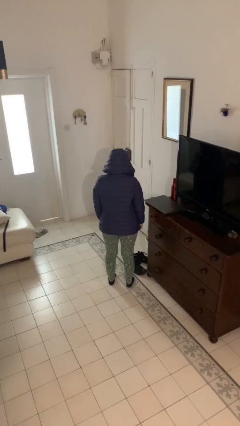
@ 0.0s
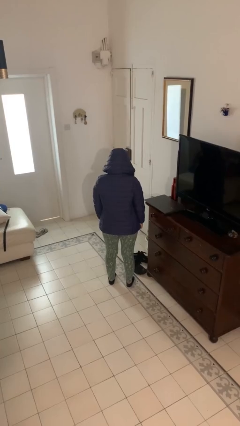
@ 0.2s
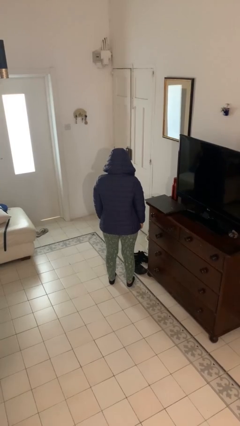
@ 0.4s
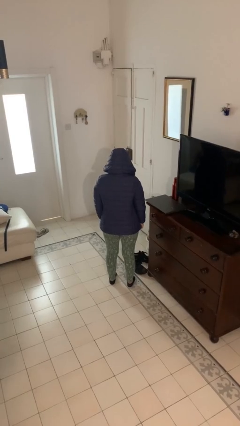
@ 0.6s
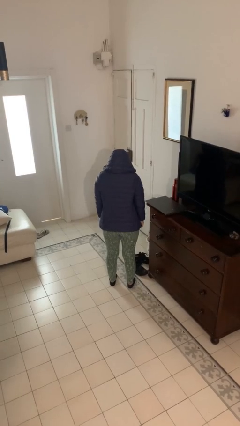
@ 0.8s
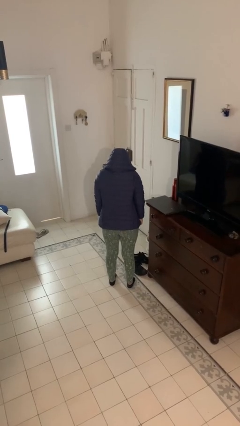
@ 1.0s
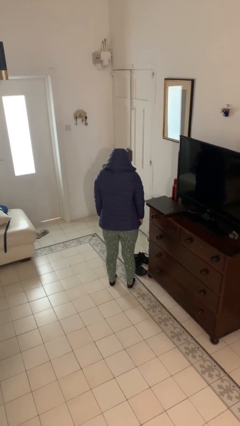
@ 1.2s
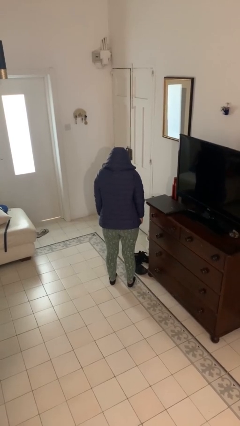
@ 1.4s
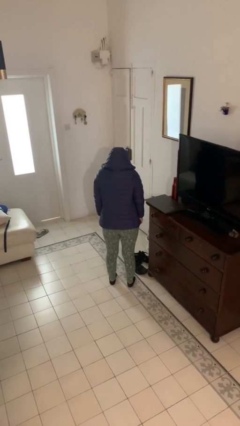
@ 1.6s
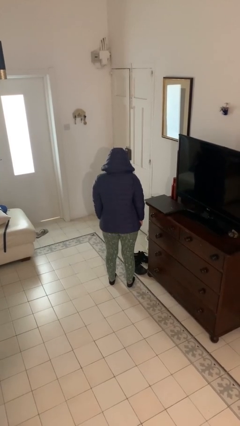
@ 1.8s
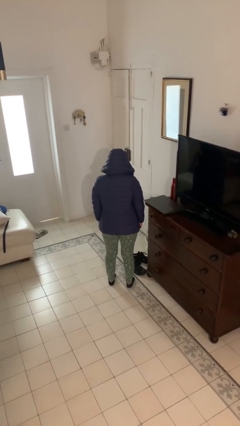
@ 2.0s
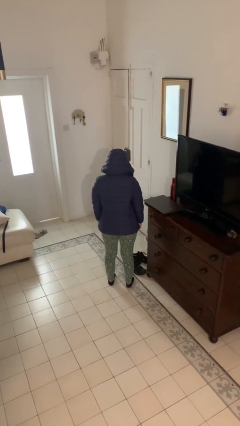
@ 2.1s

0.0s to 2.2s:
person shrugs

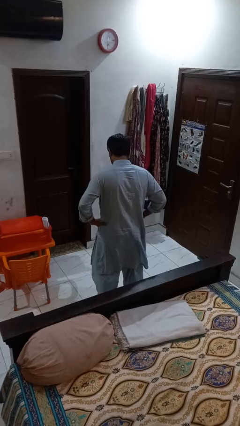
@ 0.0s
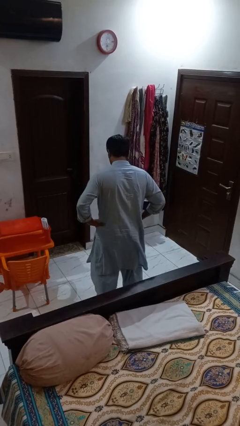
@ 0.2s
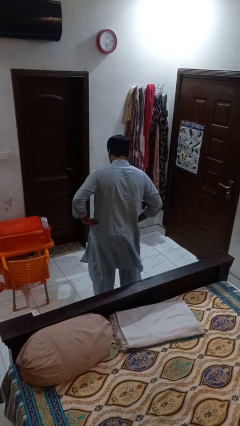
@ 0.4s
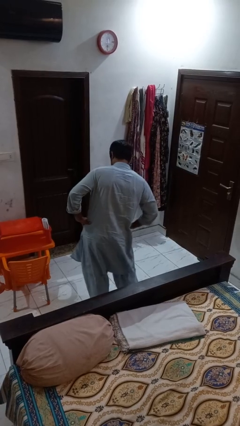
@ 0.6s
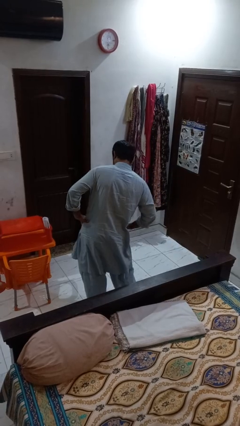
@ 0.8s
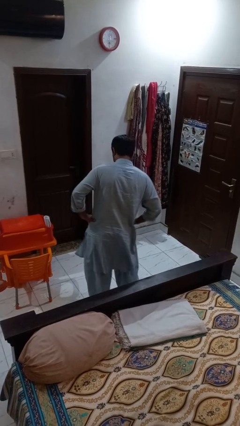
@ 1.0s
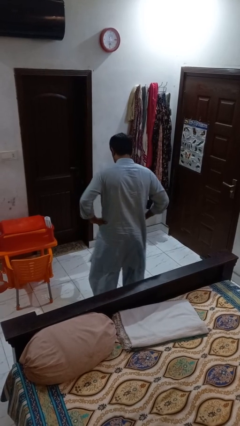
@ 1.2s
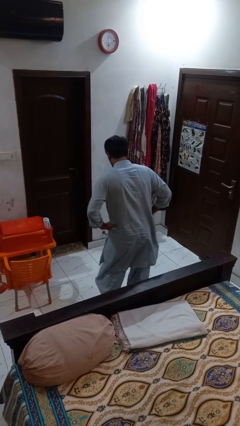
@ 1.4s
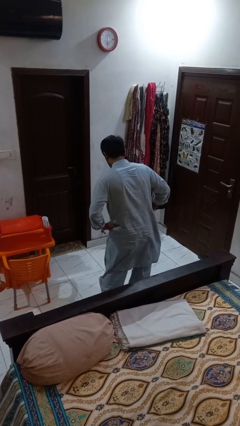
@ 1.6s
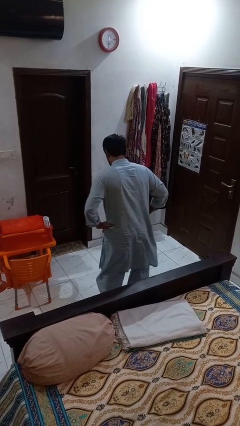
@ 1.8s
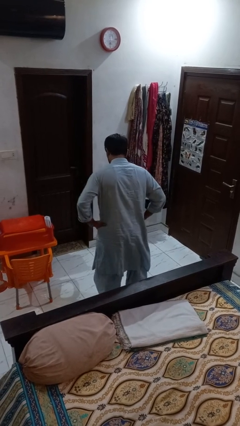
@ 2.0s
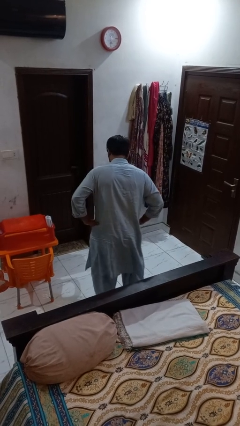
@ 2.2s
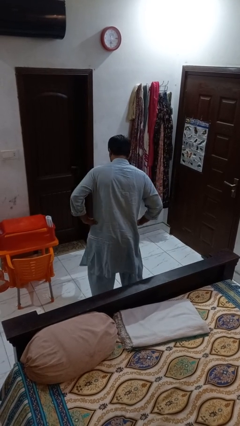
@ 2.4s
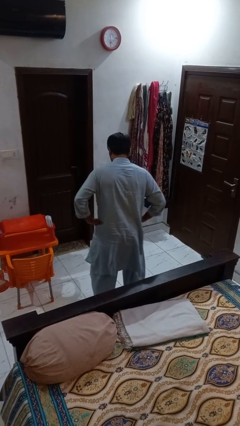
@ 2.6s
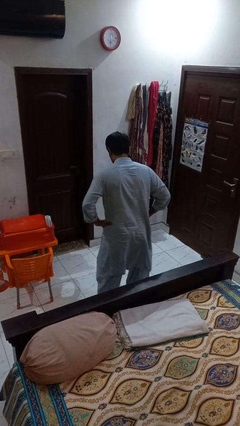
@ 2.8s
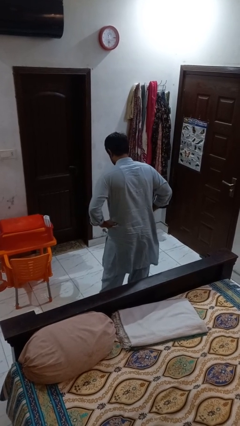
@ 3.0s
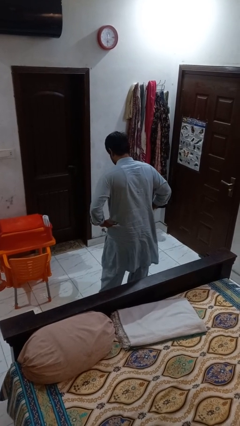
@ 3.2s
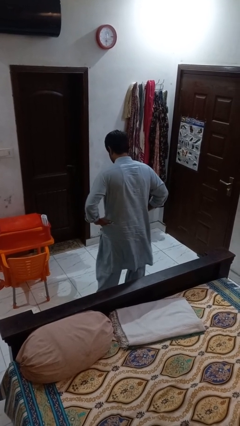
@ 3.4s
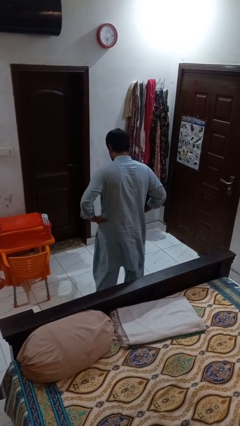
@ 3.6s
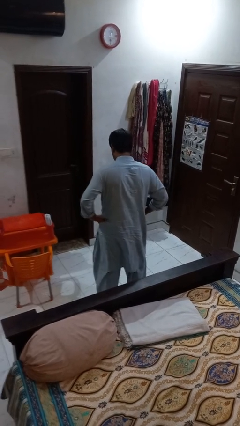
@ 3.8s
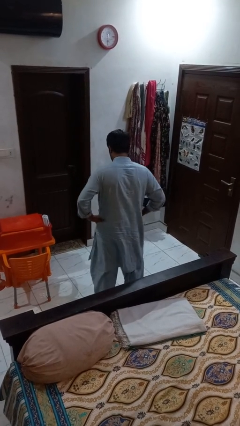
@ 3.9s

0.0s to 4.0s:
person wiggles hips

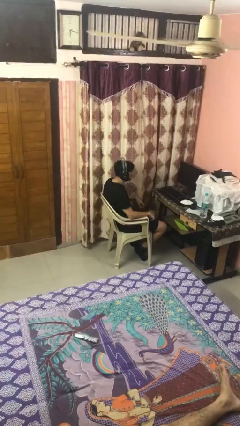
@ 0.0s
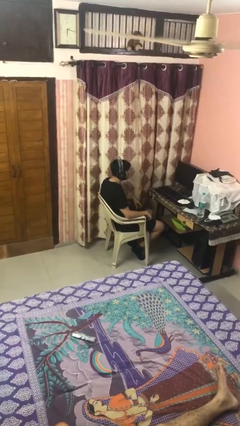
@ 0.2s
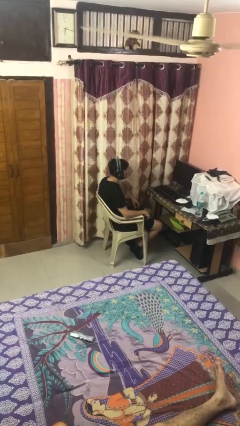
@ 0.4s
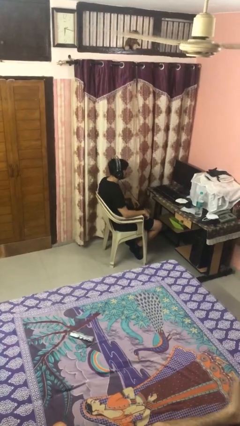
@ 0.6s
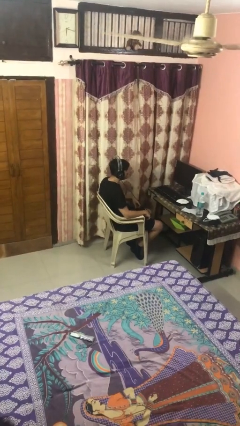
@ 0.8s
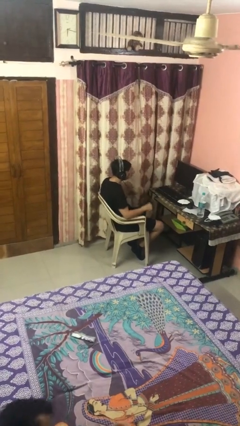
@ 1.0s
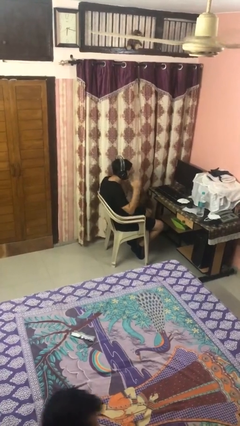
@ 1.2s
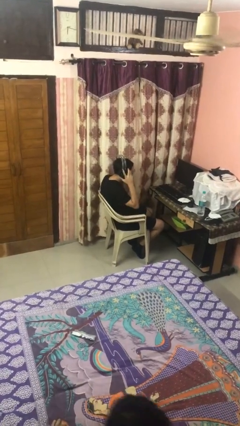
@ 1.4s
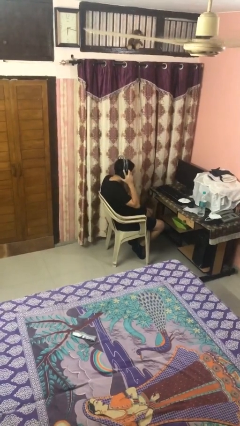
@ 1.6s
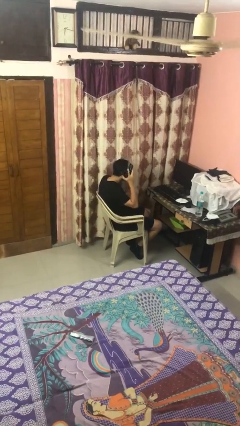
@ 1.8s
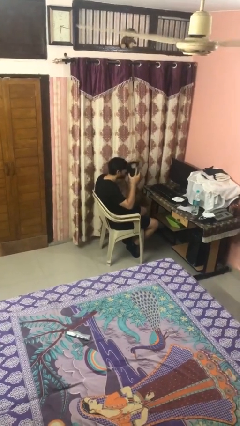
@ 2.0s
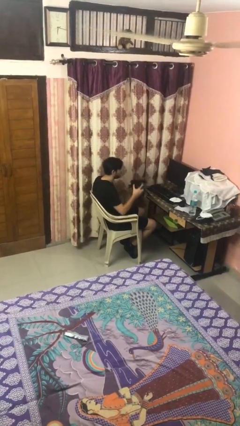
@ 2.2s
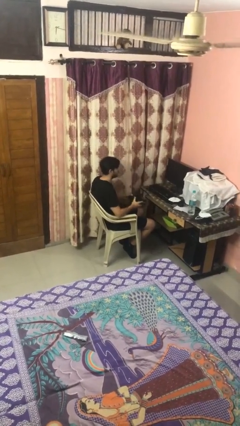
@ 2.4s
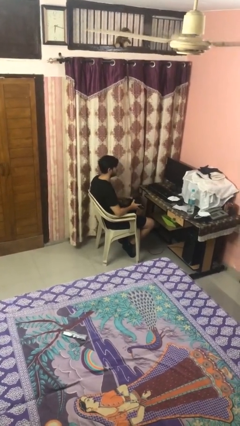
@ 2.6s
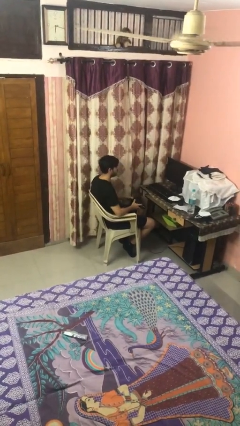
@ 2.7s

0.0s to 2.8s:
person takes off headphones

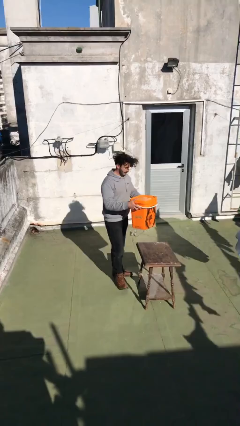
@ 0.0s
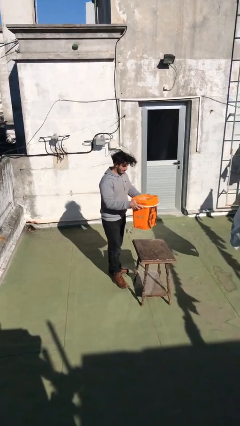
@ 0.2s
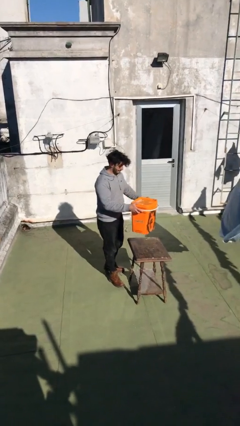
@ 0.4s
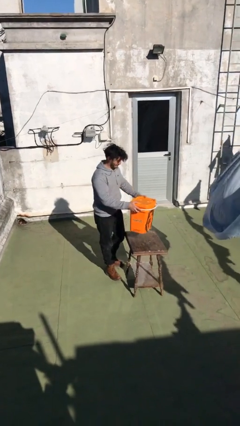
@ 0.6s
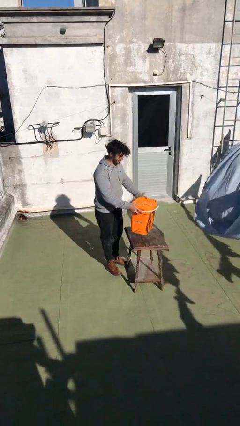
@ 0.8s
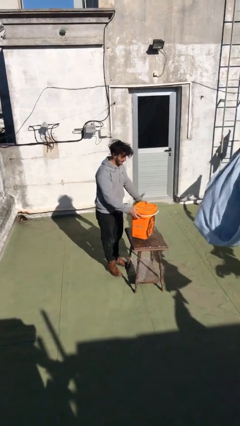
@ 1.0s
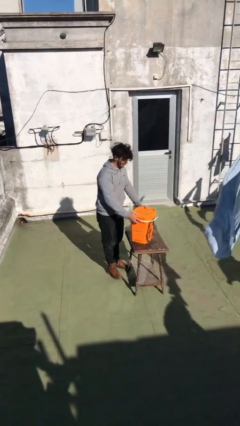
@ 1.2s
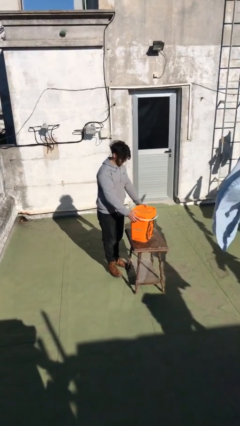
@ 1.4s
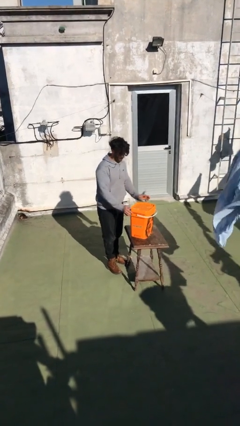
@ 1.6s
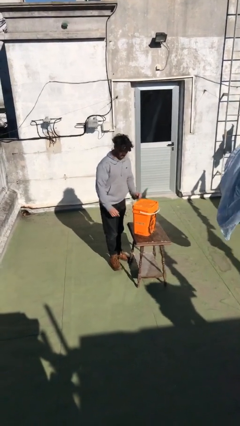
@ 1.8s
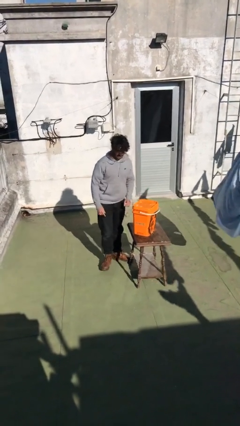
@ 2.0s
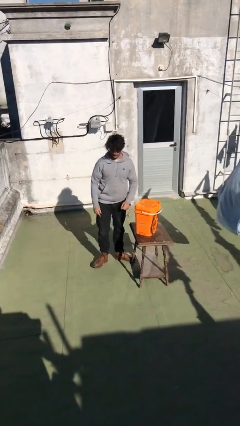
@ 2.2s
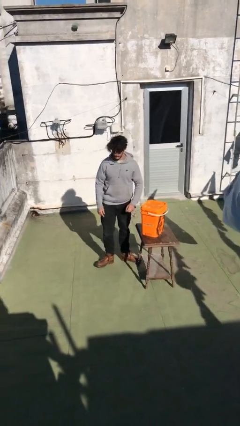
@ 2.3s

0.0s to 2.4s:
person puts down object on table

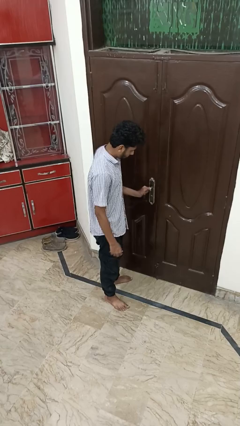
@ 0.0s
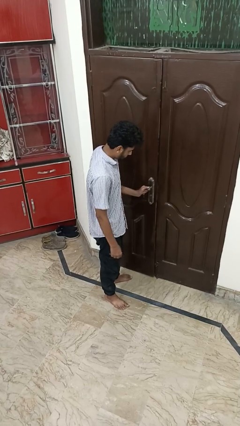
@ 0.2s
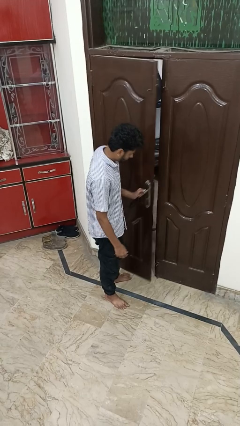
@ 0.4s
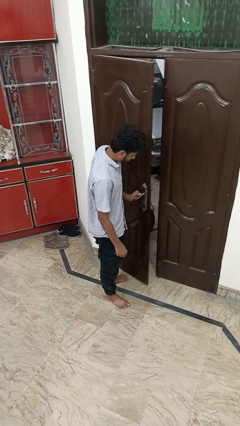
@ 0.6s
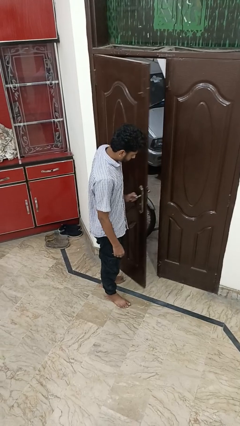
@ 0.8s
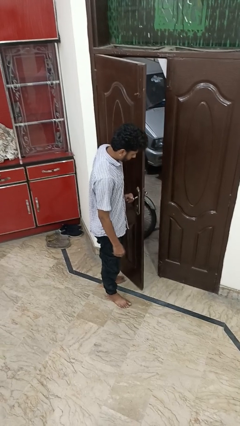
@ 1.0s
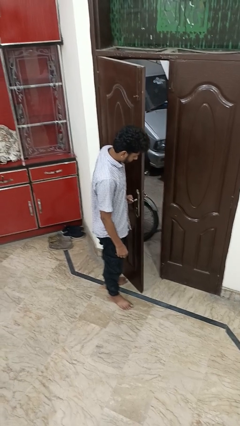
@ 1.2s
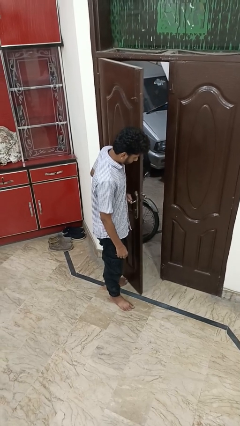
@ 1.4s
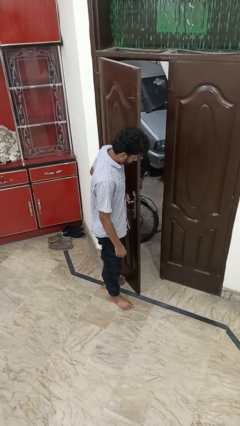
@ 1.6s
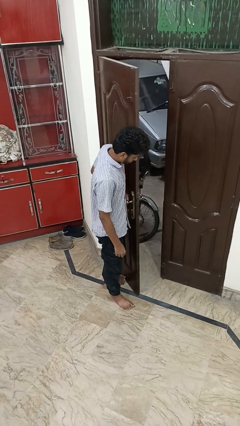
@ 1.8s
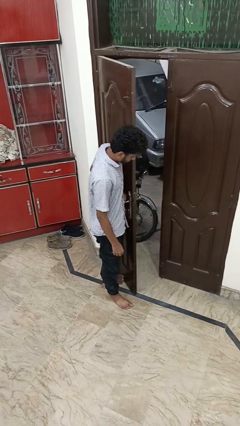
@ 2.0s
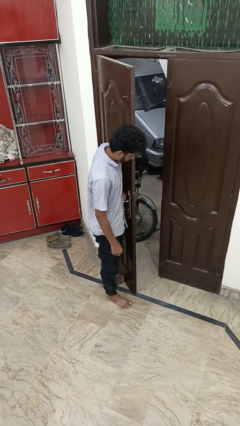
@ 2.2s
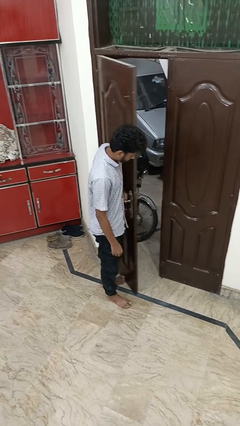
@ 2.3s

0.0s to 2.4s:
person opens facility door

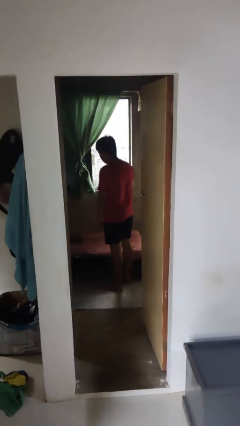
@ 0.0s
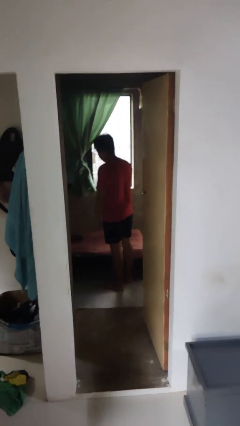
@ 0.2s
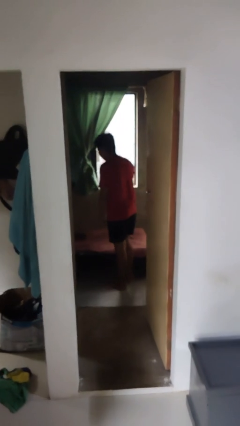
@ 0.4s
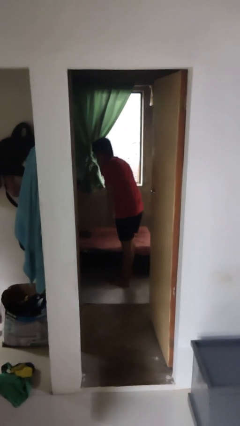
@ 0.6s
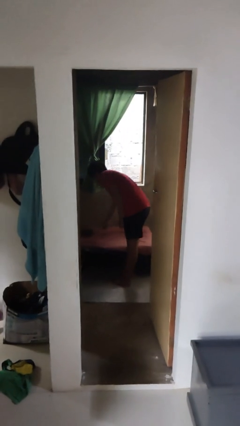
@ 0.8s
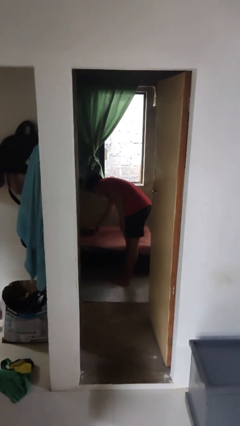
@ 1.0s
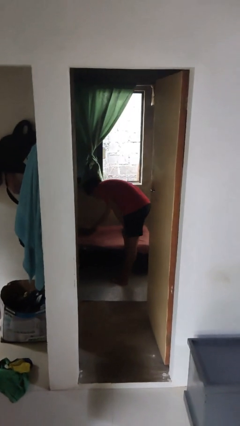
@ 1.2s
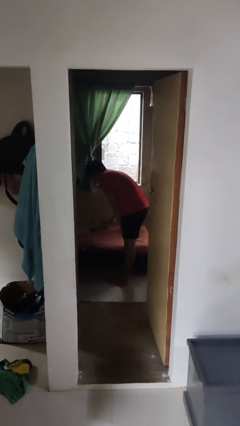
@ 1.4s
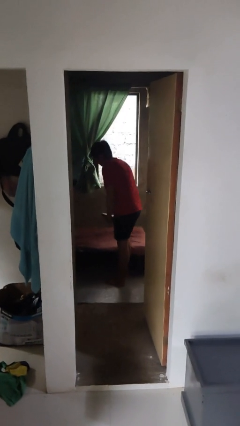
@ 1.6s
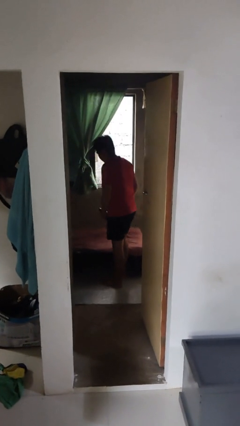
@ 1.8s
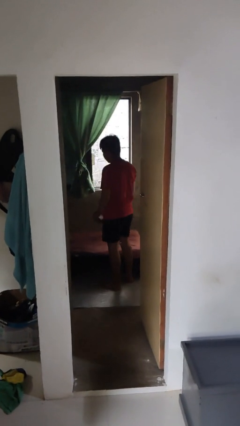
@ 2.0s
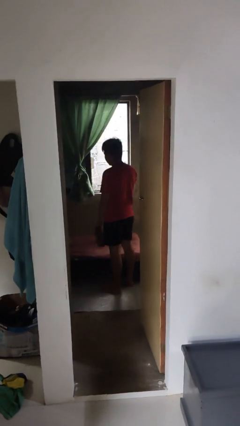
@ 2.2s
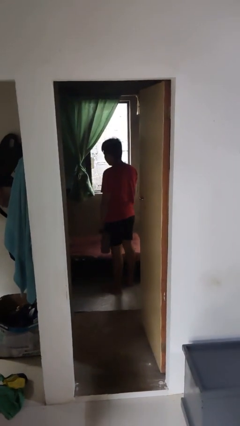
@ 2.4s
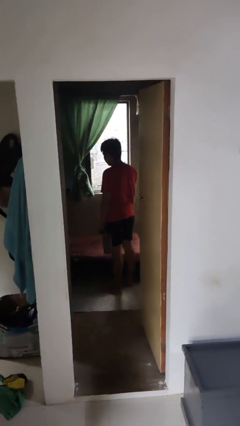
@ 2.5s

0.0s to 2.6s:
person picks up object from bed

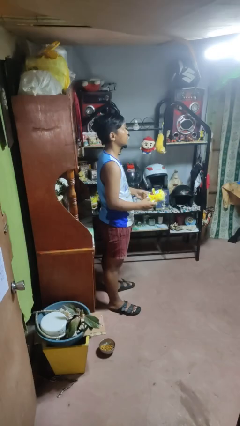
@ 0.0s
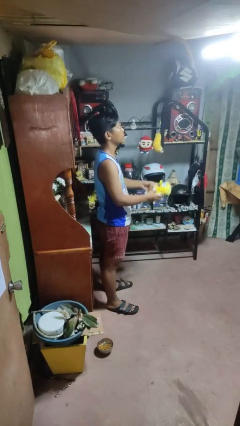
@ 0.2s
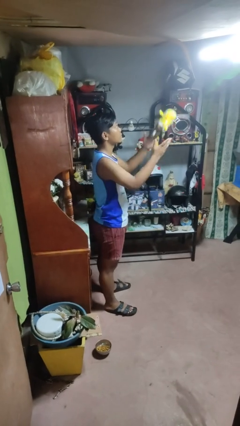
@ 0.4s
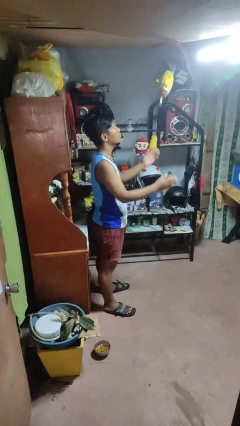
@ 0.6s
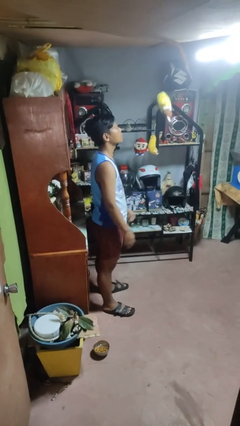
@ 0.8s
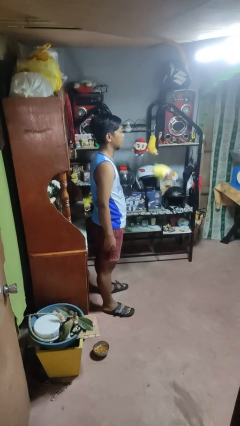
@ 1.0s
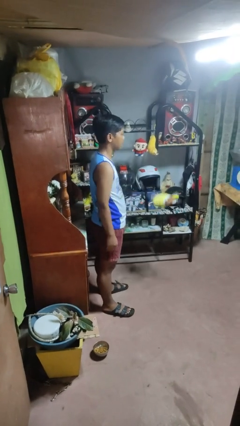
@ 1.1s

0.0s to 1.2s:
person throws object into air
